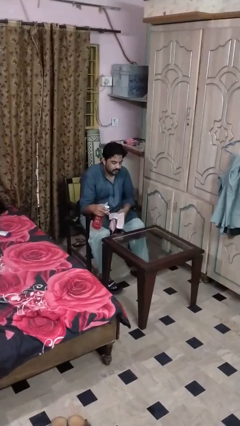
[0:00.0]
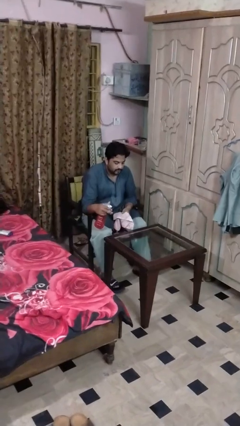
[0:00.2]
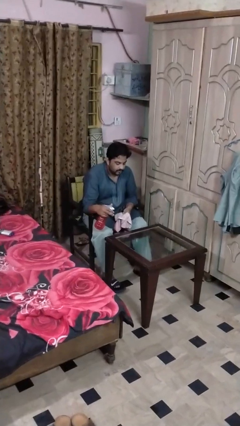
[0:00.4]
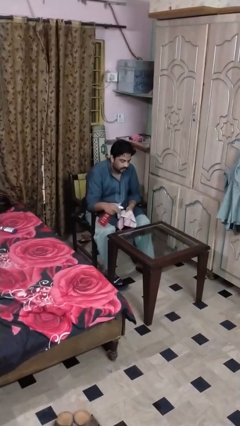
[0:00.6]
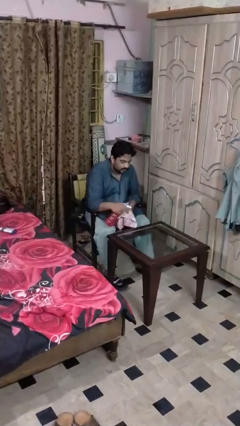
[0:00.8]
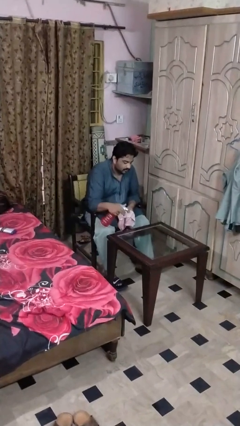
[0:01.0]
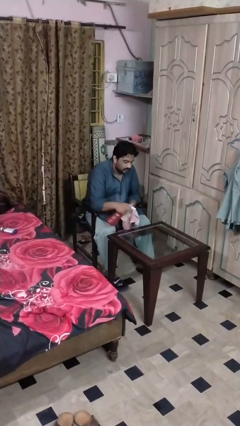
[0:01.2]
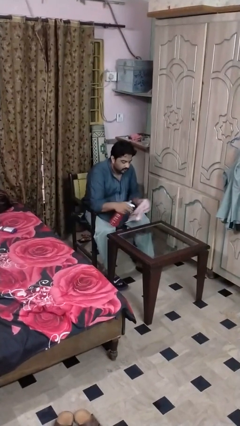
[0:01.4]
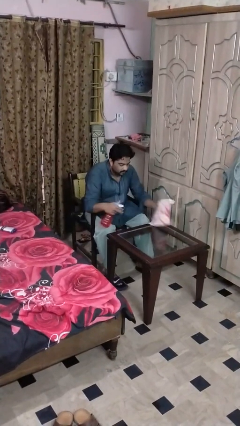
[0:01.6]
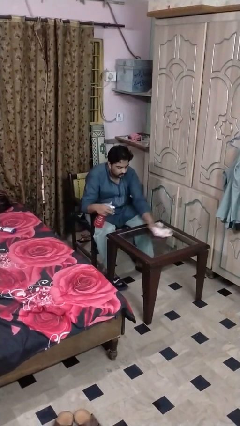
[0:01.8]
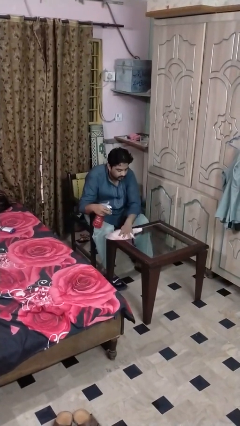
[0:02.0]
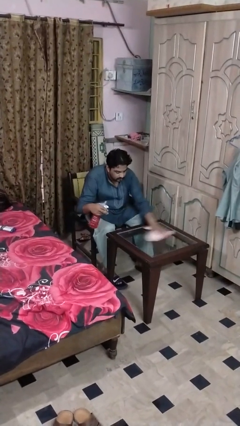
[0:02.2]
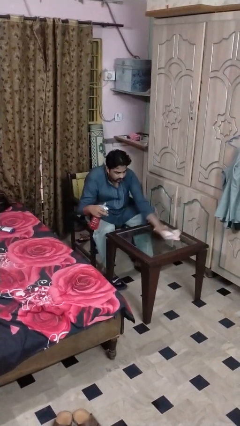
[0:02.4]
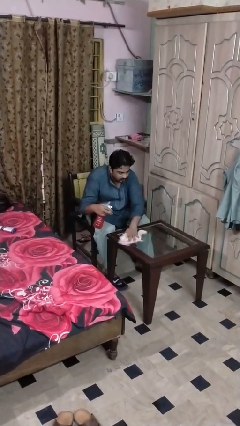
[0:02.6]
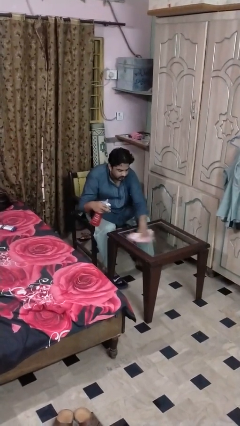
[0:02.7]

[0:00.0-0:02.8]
person sprays from bottle

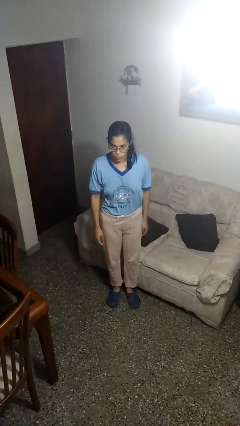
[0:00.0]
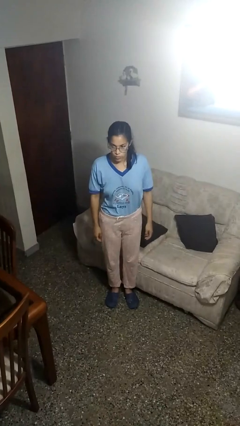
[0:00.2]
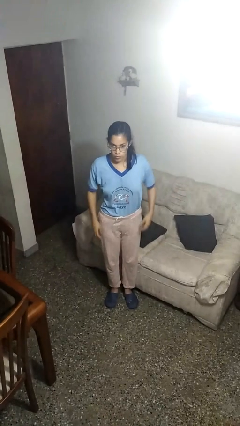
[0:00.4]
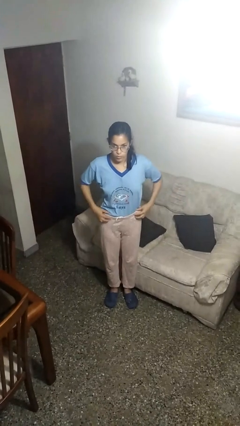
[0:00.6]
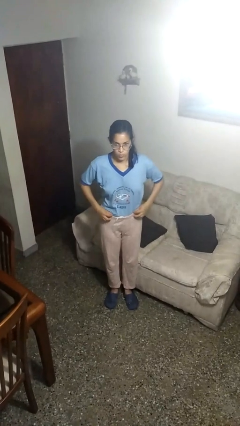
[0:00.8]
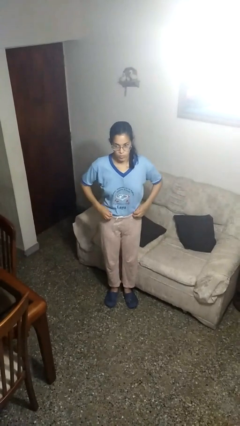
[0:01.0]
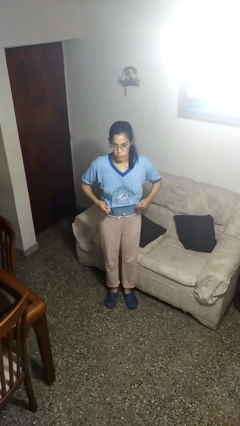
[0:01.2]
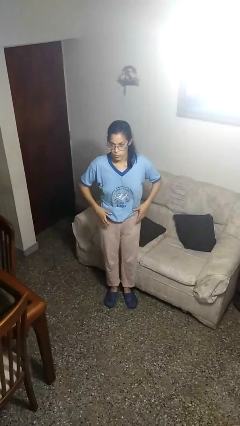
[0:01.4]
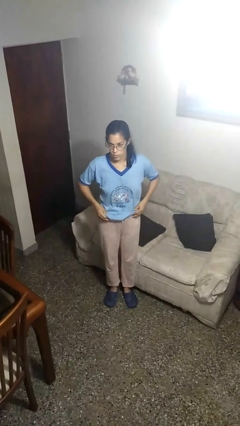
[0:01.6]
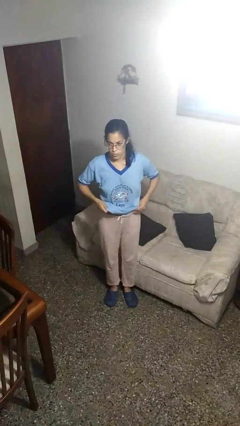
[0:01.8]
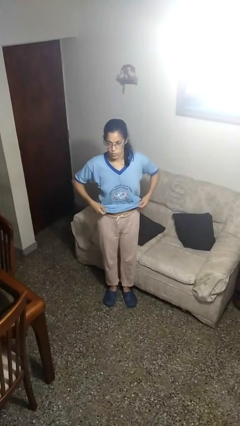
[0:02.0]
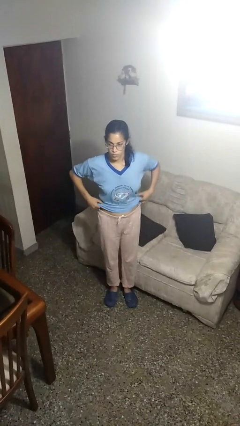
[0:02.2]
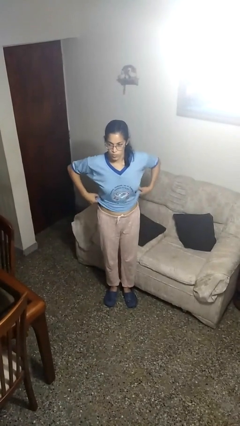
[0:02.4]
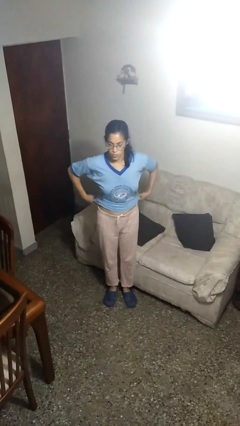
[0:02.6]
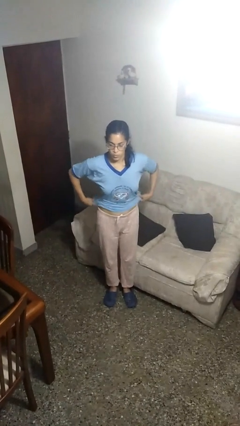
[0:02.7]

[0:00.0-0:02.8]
person untucks shirt

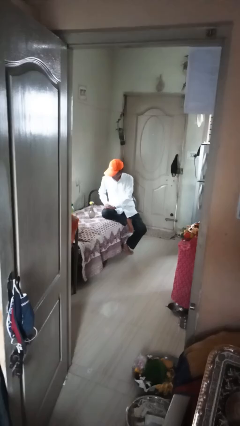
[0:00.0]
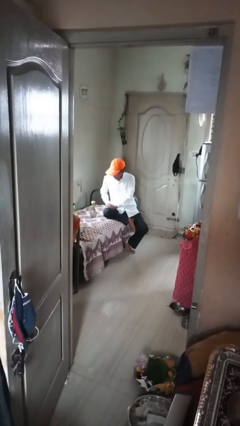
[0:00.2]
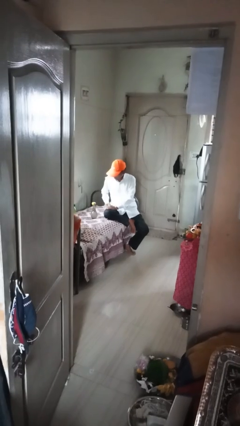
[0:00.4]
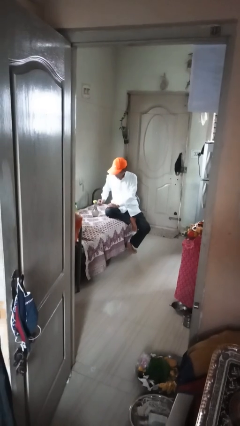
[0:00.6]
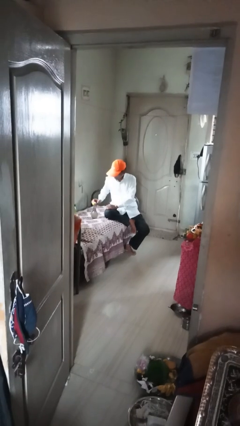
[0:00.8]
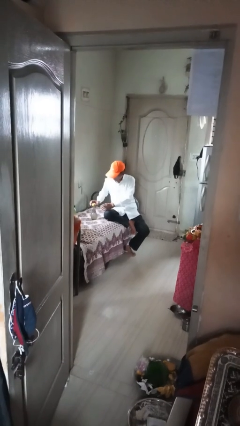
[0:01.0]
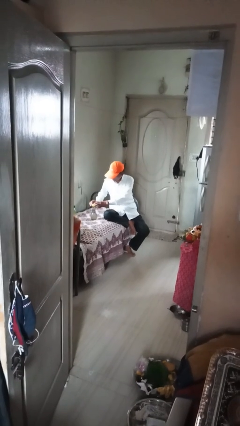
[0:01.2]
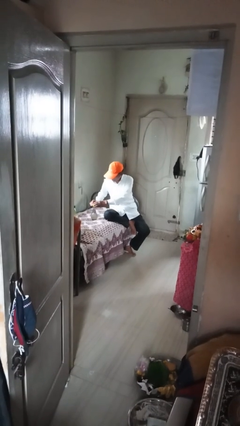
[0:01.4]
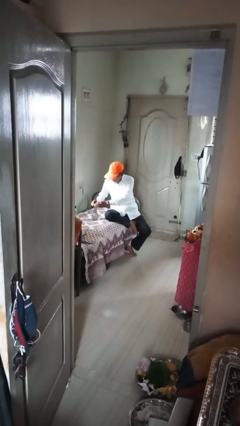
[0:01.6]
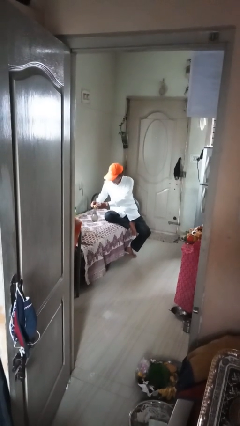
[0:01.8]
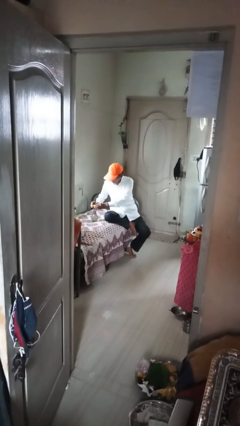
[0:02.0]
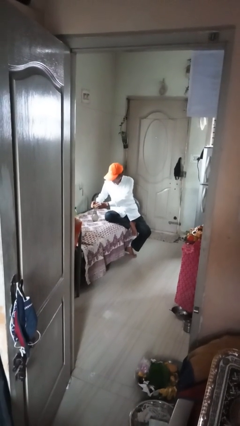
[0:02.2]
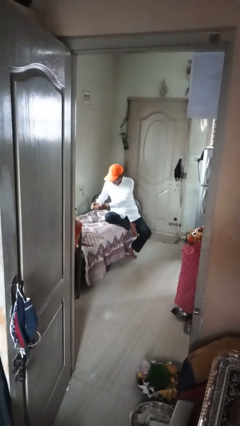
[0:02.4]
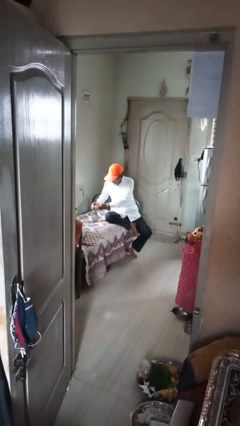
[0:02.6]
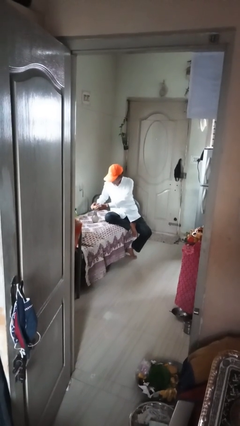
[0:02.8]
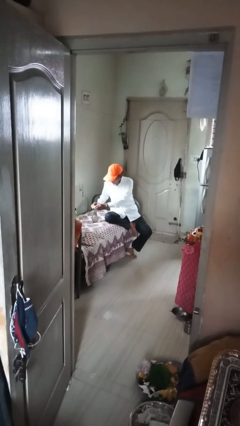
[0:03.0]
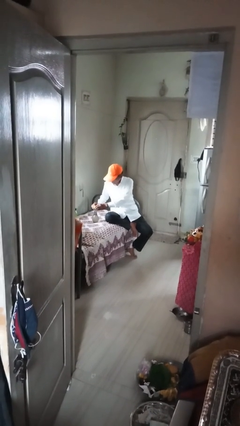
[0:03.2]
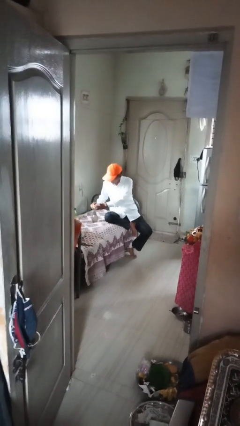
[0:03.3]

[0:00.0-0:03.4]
person arranges flowers in vase

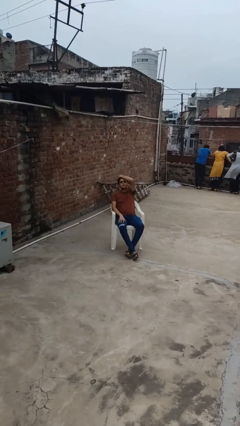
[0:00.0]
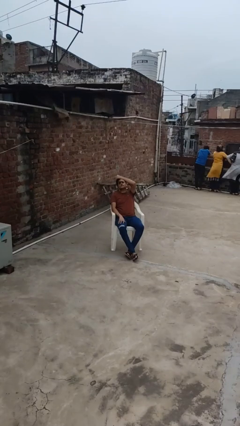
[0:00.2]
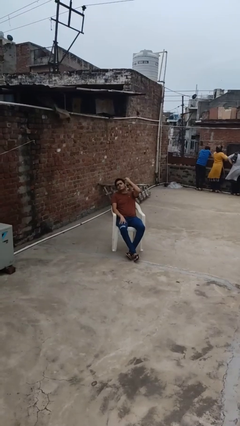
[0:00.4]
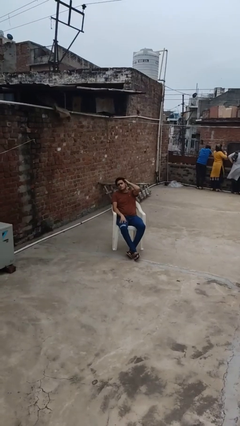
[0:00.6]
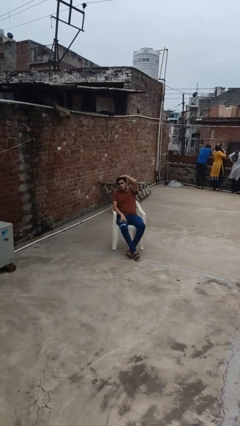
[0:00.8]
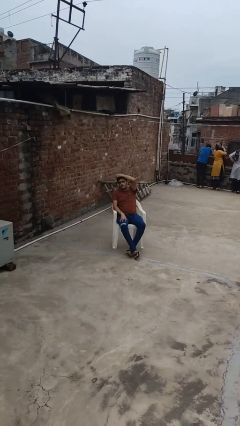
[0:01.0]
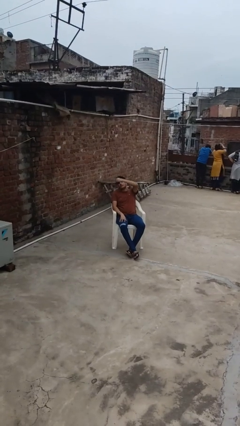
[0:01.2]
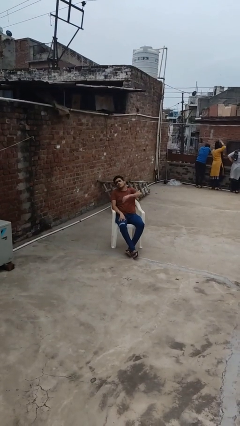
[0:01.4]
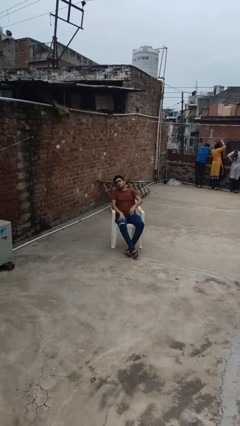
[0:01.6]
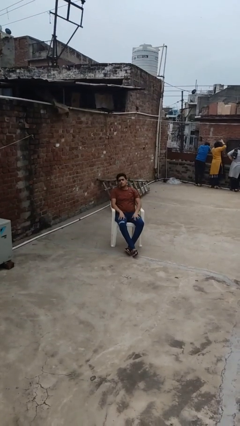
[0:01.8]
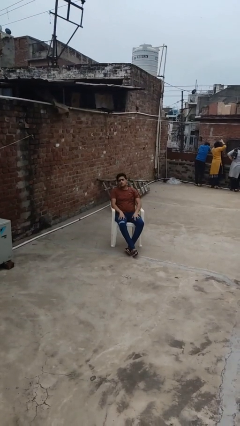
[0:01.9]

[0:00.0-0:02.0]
person strokes hair

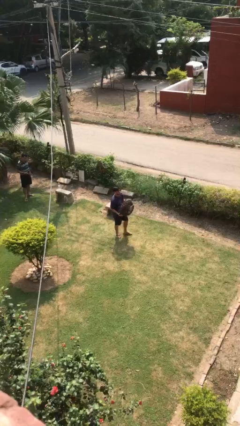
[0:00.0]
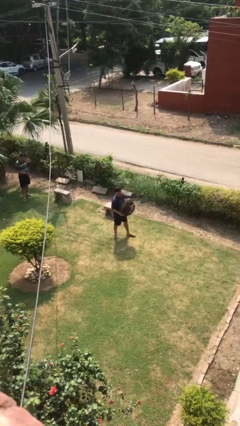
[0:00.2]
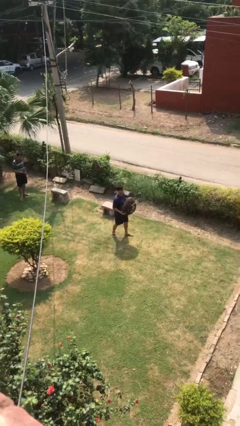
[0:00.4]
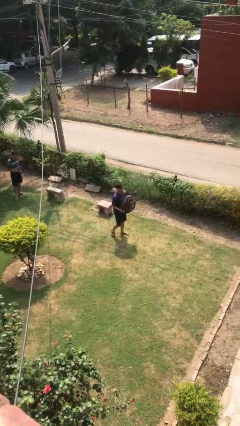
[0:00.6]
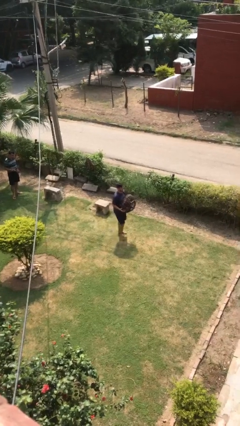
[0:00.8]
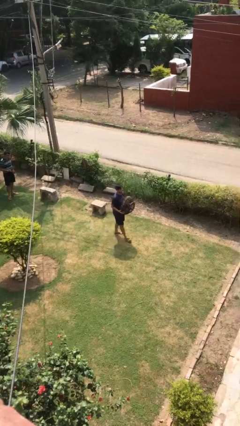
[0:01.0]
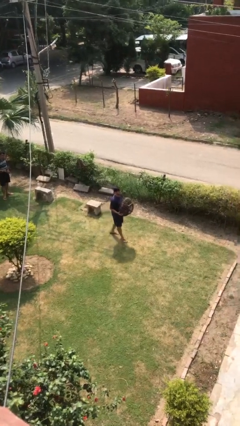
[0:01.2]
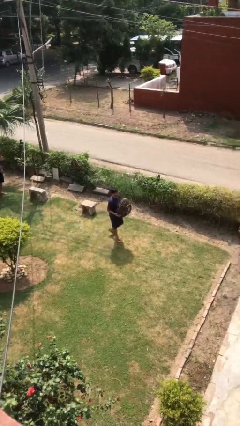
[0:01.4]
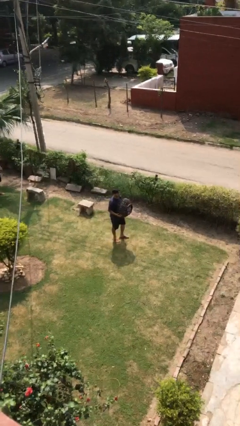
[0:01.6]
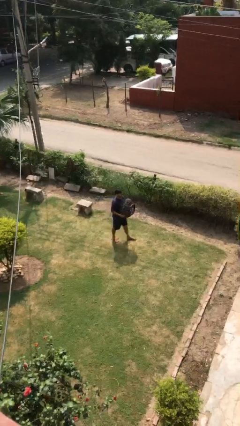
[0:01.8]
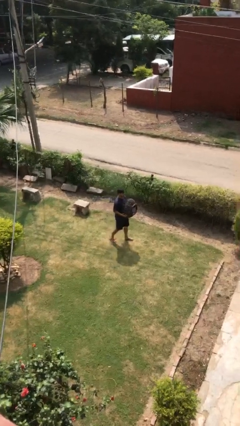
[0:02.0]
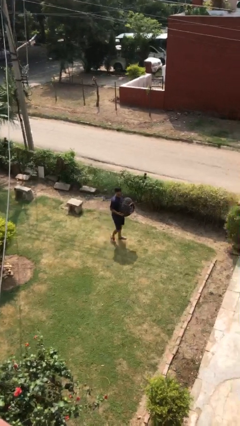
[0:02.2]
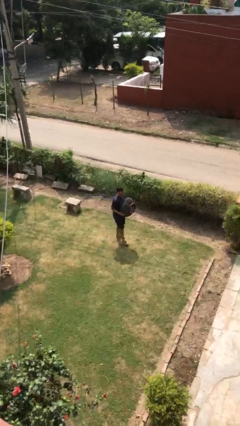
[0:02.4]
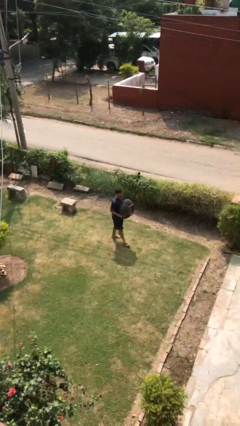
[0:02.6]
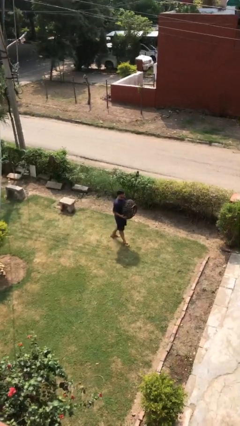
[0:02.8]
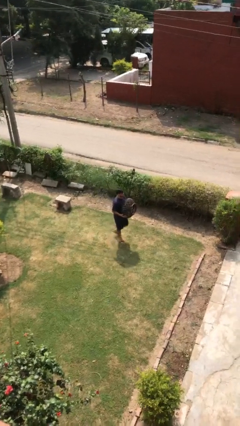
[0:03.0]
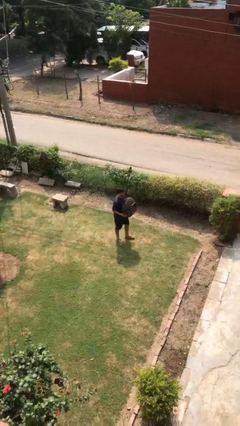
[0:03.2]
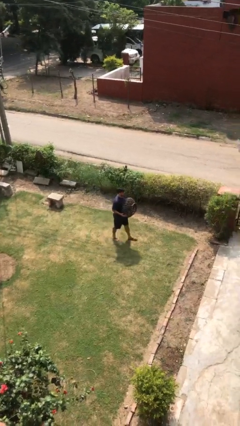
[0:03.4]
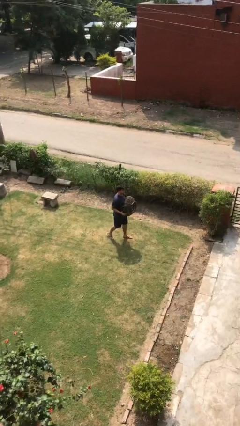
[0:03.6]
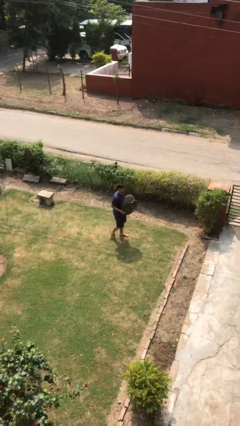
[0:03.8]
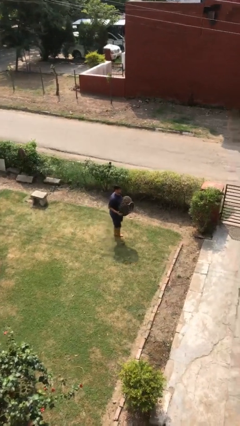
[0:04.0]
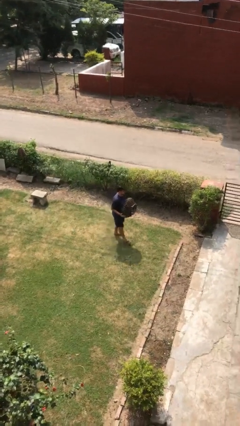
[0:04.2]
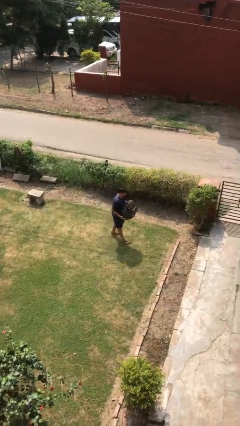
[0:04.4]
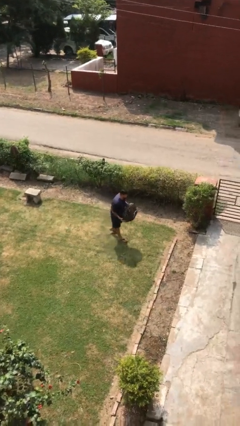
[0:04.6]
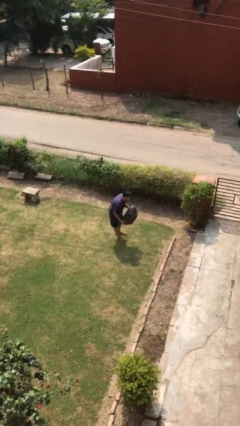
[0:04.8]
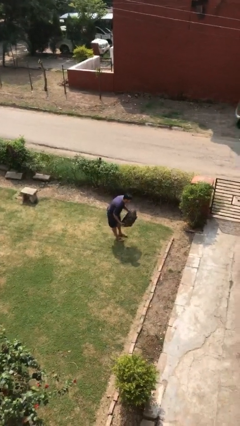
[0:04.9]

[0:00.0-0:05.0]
person carries heavy object

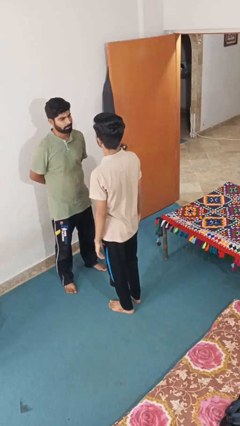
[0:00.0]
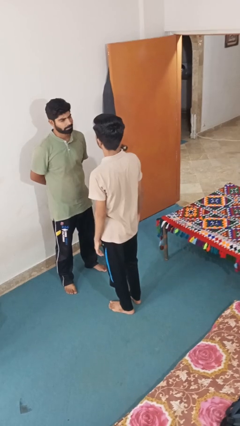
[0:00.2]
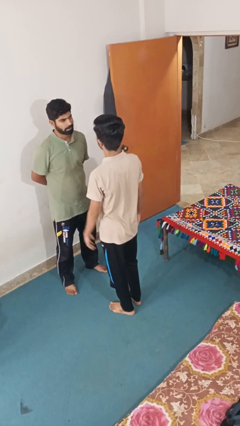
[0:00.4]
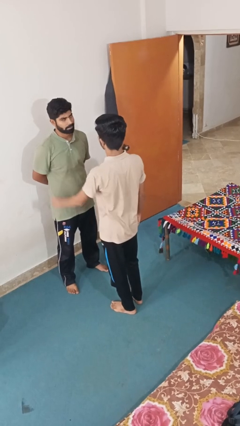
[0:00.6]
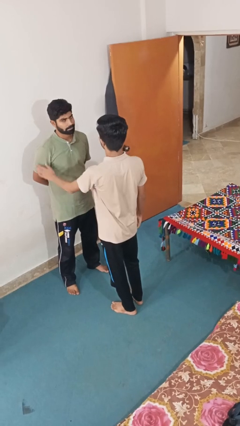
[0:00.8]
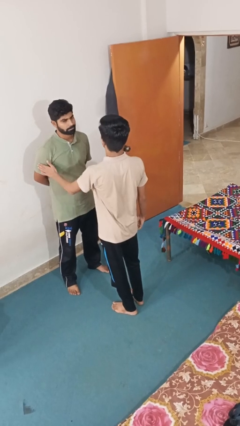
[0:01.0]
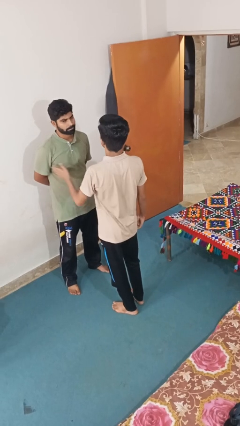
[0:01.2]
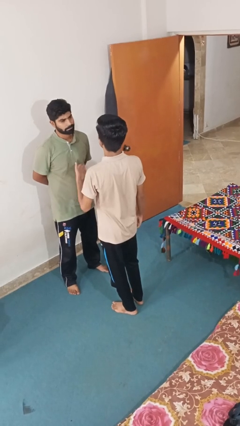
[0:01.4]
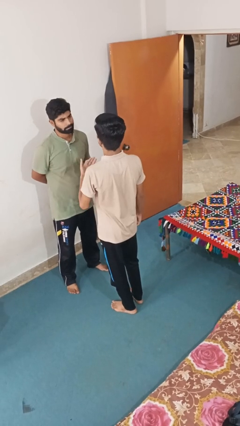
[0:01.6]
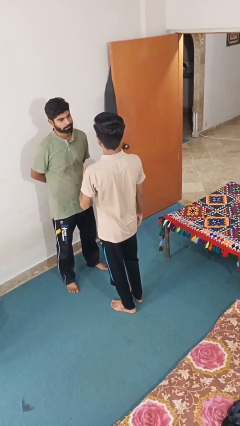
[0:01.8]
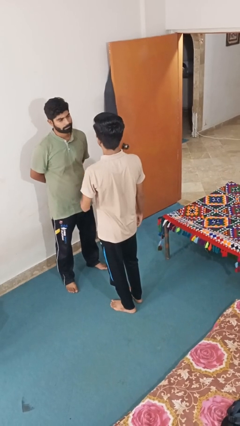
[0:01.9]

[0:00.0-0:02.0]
person shoves person
